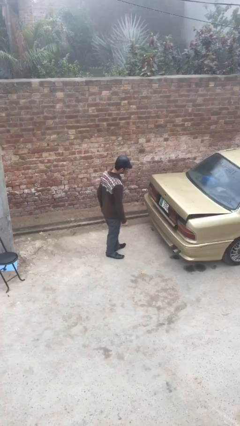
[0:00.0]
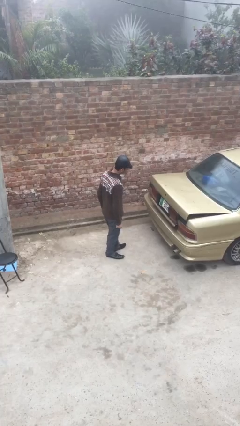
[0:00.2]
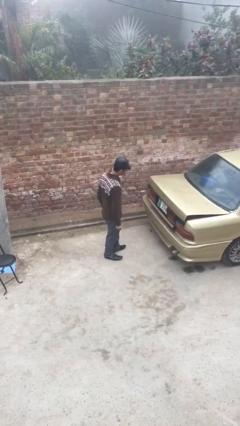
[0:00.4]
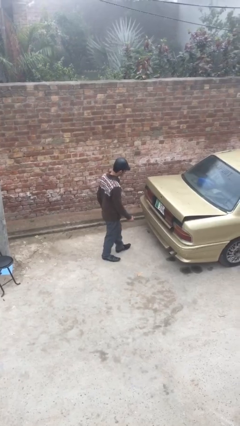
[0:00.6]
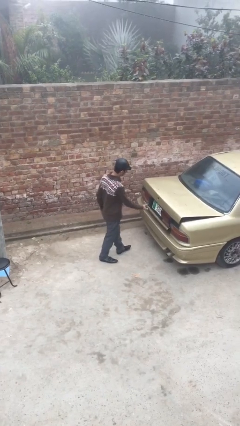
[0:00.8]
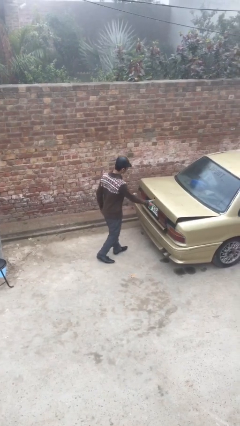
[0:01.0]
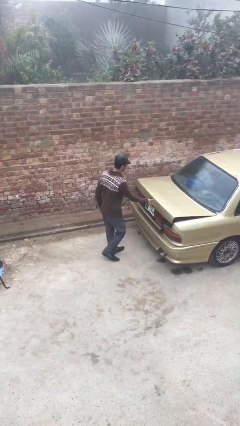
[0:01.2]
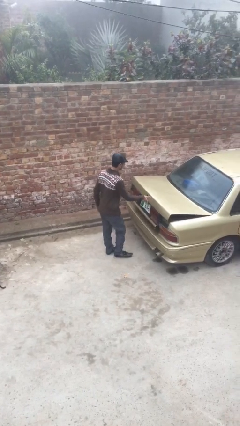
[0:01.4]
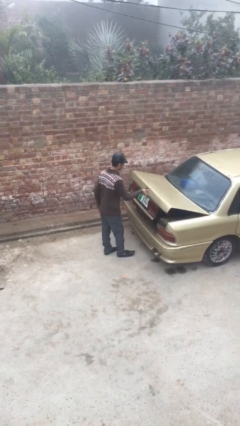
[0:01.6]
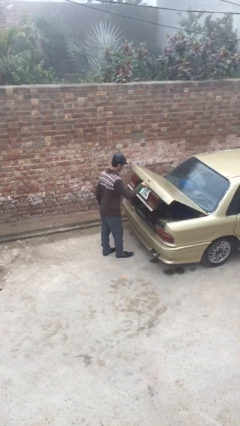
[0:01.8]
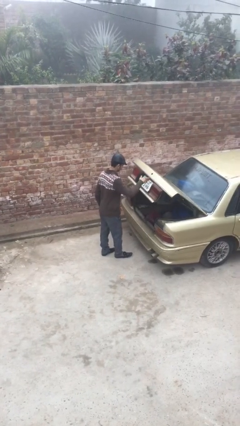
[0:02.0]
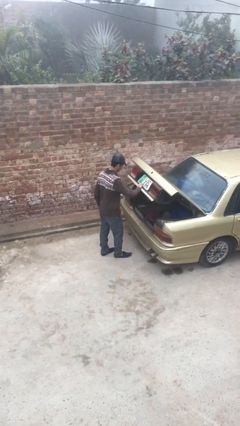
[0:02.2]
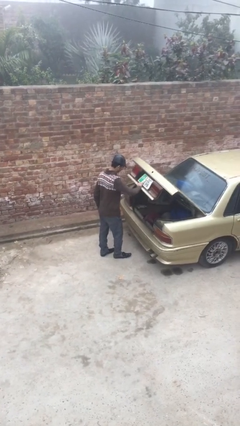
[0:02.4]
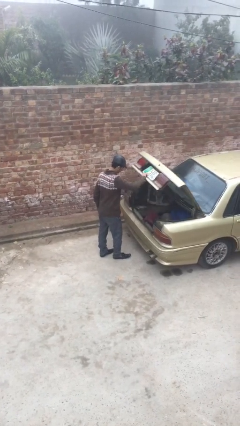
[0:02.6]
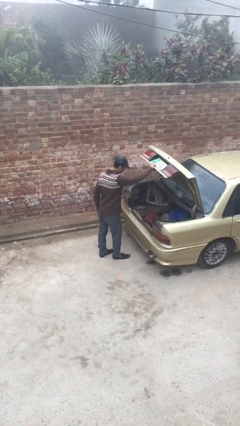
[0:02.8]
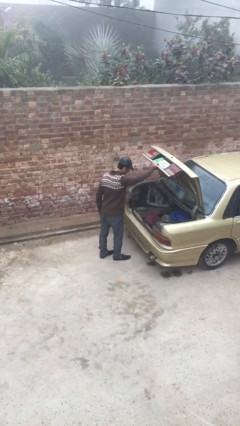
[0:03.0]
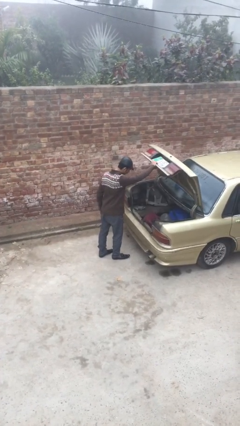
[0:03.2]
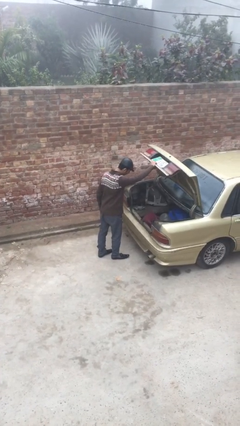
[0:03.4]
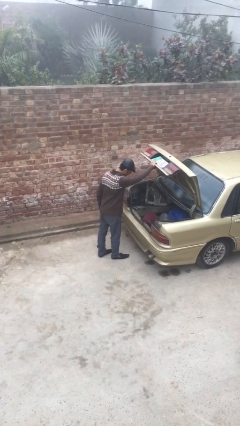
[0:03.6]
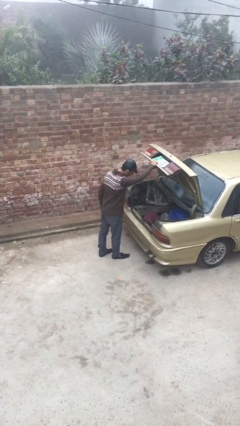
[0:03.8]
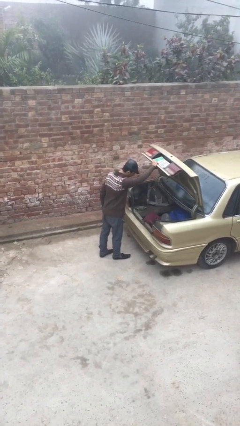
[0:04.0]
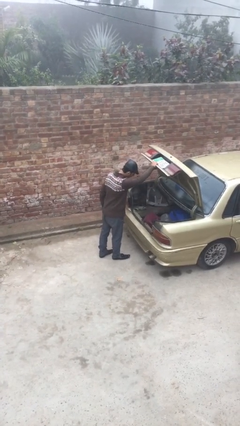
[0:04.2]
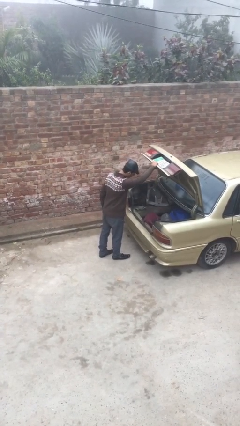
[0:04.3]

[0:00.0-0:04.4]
person opens car trunk

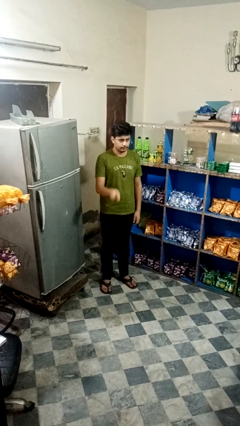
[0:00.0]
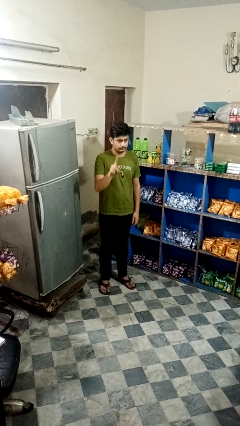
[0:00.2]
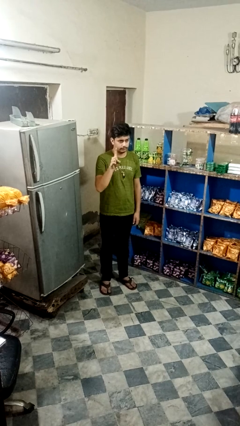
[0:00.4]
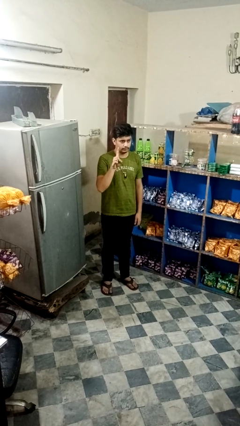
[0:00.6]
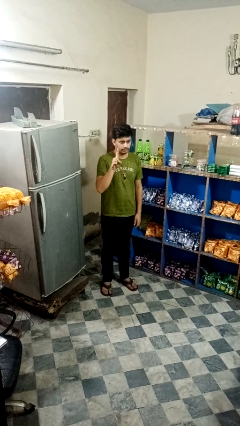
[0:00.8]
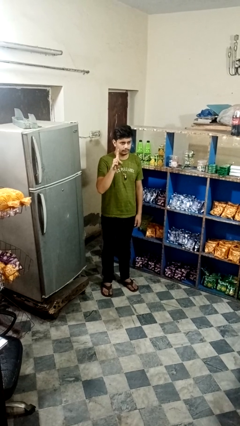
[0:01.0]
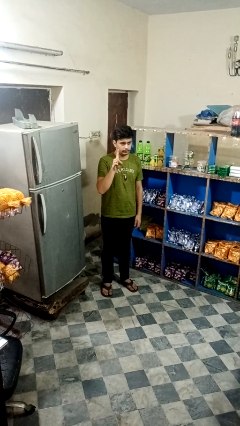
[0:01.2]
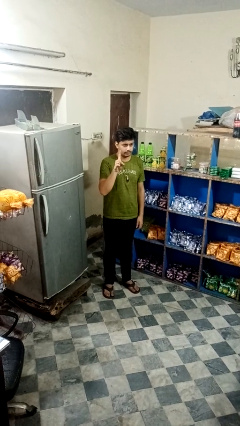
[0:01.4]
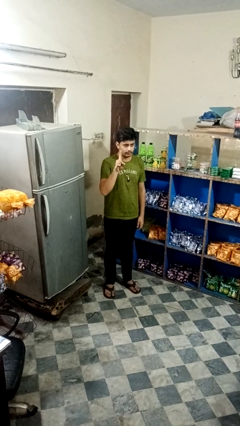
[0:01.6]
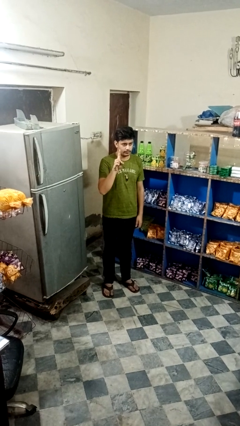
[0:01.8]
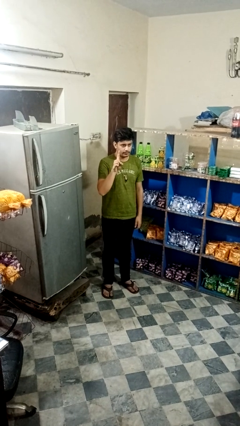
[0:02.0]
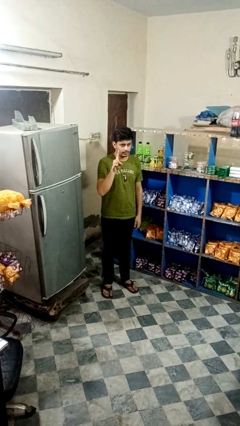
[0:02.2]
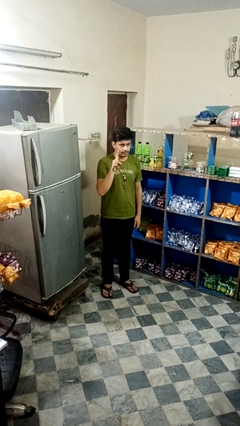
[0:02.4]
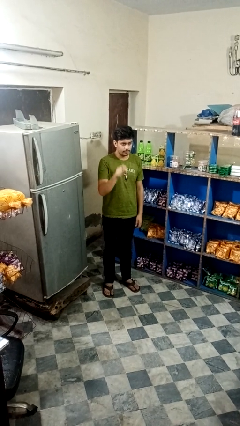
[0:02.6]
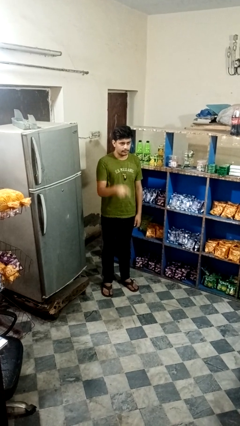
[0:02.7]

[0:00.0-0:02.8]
person gestures number one

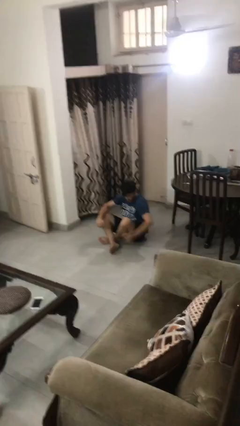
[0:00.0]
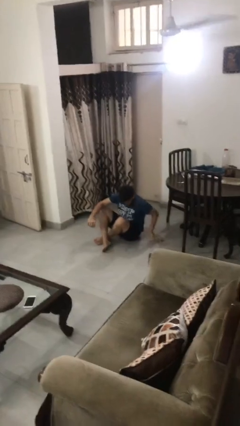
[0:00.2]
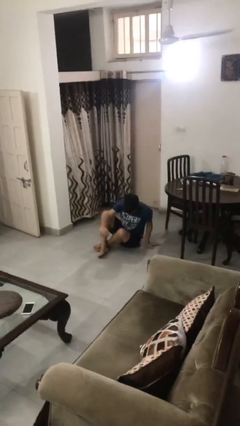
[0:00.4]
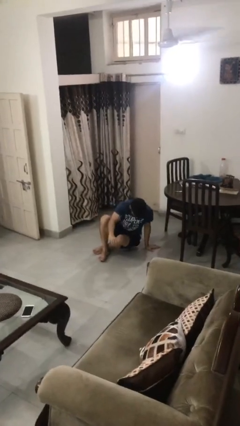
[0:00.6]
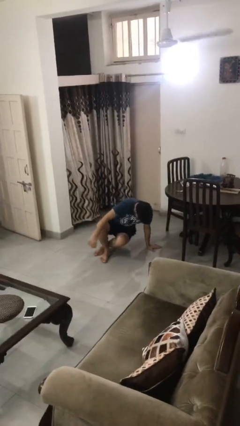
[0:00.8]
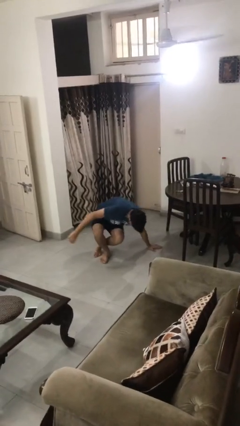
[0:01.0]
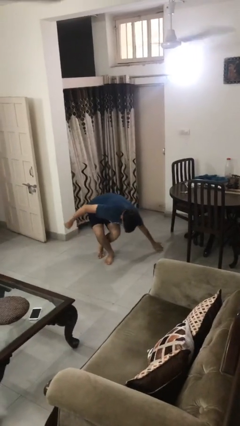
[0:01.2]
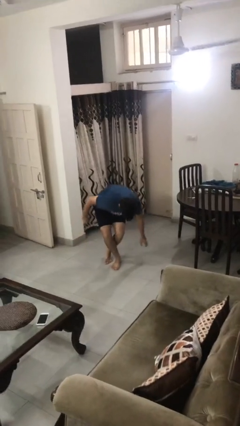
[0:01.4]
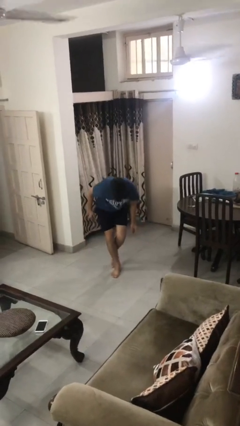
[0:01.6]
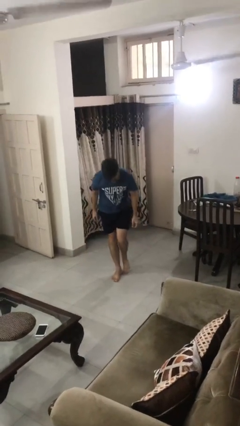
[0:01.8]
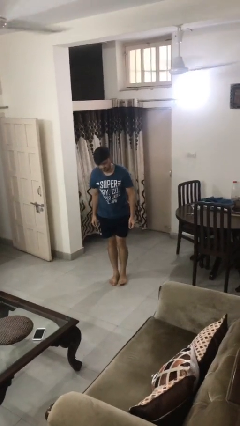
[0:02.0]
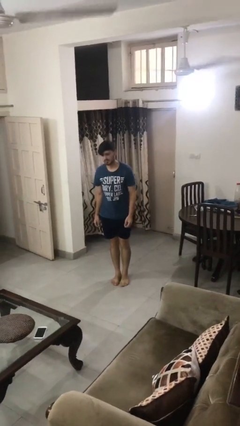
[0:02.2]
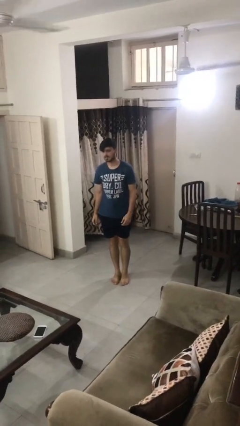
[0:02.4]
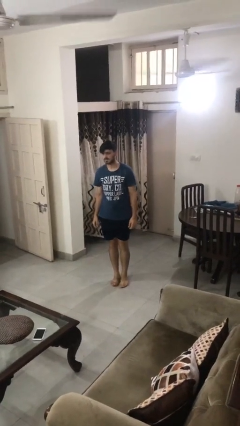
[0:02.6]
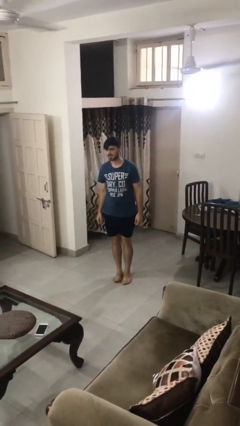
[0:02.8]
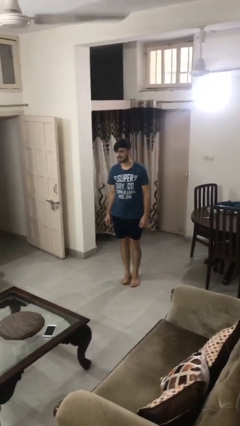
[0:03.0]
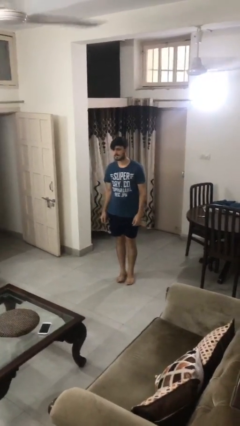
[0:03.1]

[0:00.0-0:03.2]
person stands up from floor

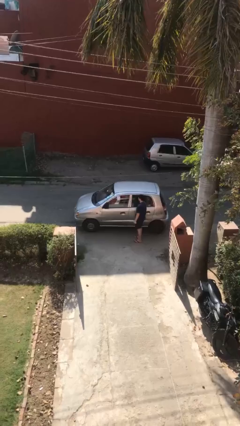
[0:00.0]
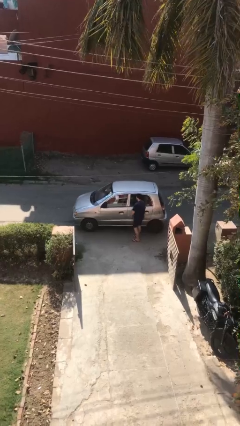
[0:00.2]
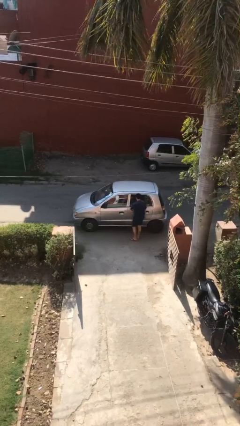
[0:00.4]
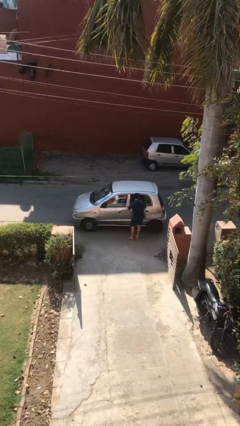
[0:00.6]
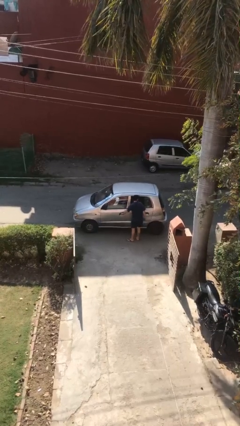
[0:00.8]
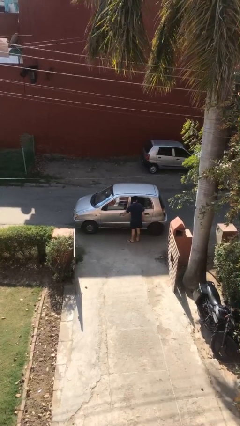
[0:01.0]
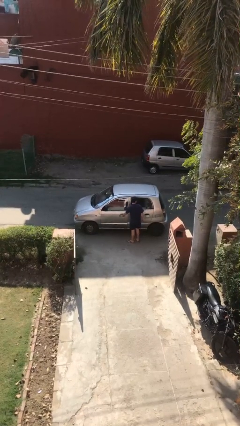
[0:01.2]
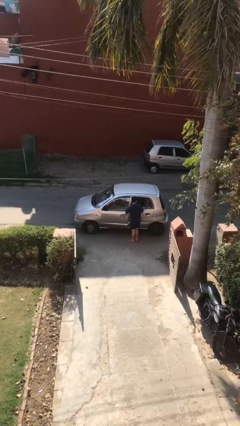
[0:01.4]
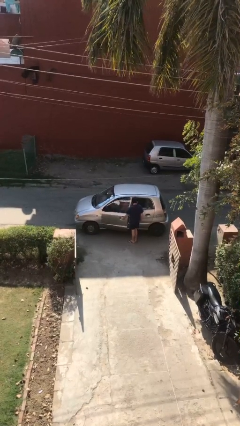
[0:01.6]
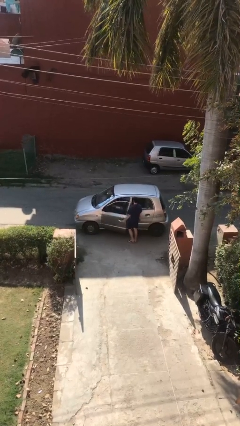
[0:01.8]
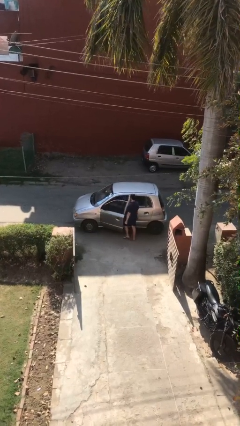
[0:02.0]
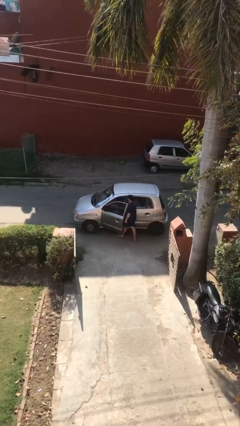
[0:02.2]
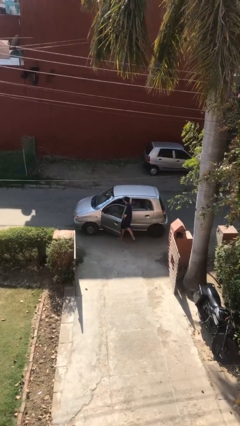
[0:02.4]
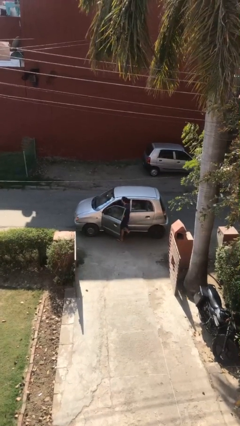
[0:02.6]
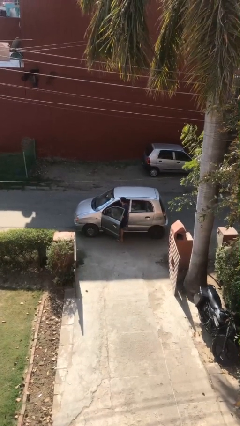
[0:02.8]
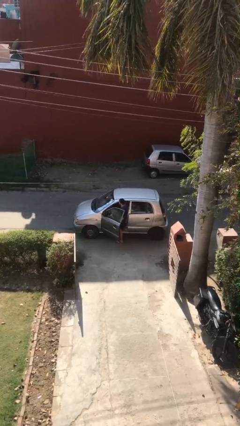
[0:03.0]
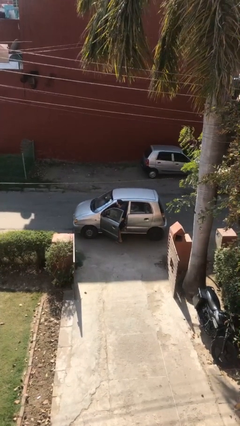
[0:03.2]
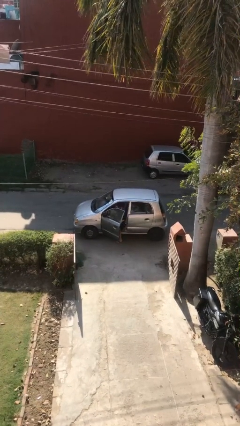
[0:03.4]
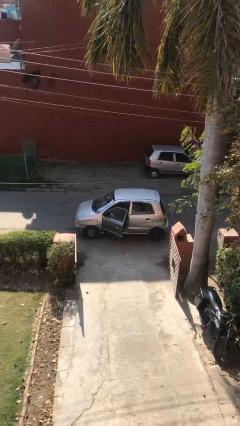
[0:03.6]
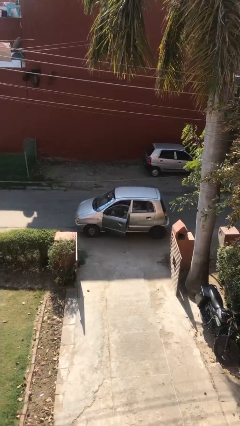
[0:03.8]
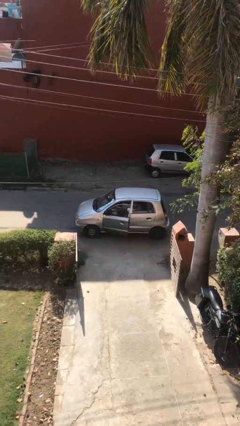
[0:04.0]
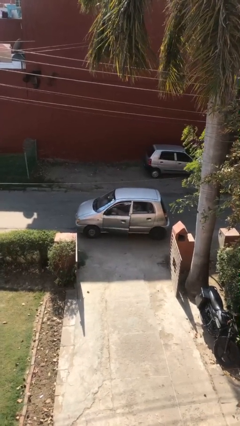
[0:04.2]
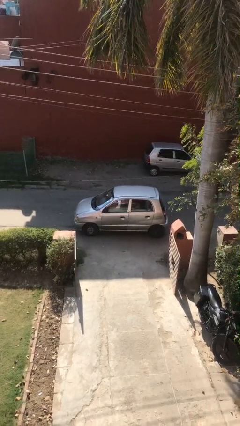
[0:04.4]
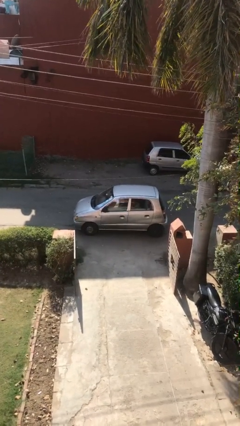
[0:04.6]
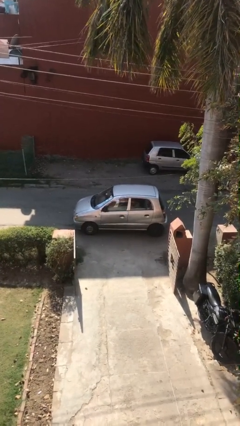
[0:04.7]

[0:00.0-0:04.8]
car picks up person

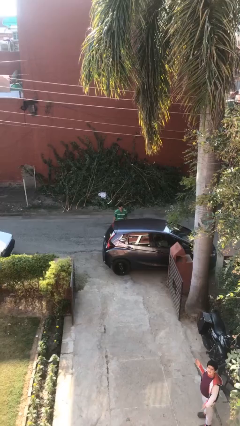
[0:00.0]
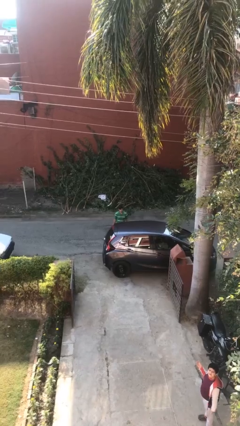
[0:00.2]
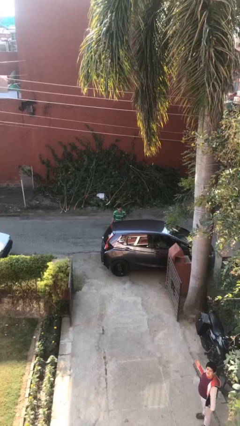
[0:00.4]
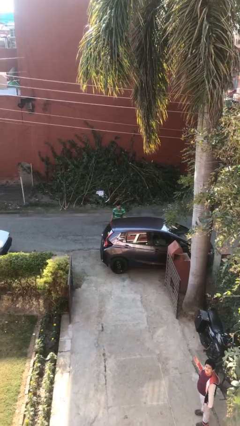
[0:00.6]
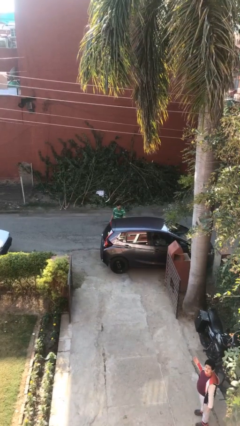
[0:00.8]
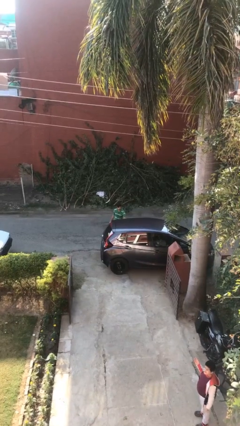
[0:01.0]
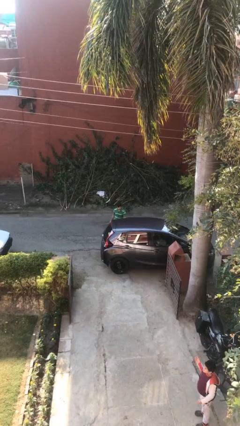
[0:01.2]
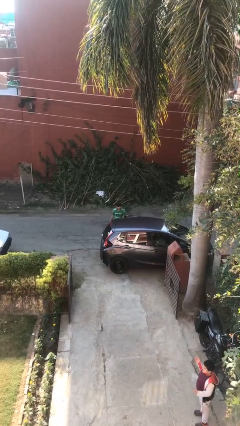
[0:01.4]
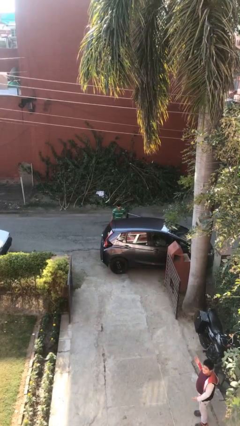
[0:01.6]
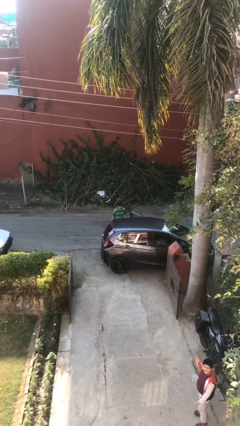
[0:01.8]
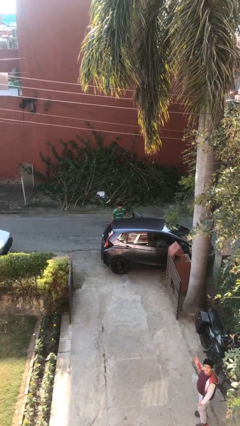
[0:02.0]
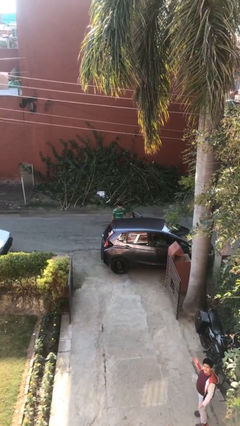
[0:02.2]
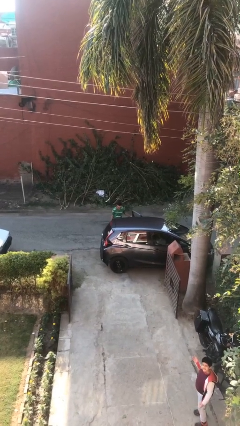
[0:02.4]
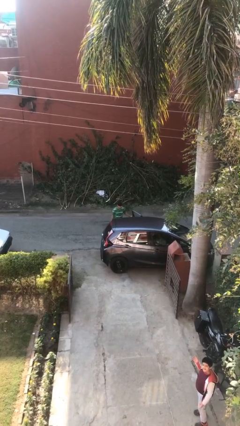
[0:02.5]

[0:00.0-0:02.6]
person opens car door
